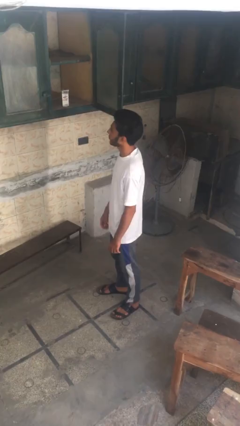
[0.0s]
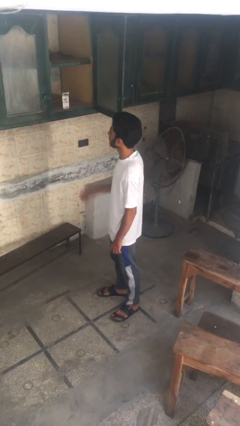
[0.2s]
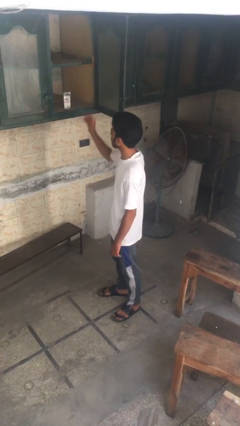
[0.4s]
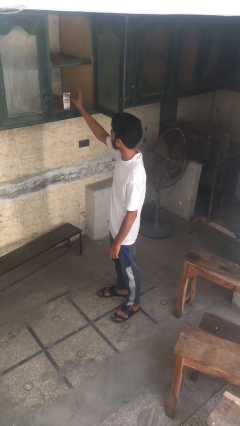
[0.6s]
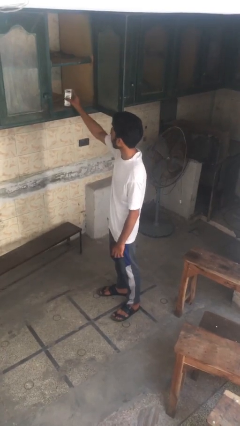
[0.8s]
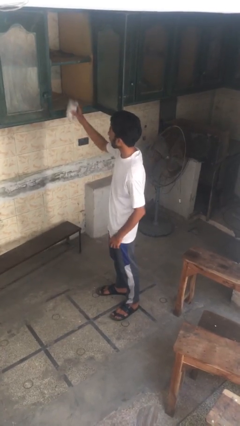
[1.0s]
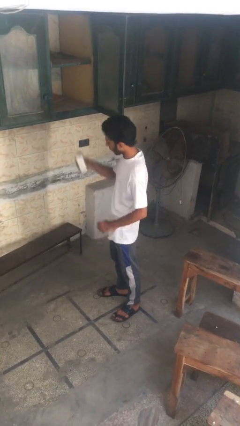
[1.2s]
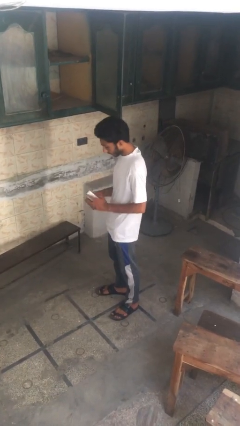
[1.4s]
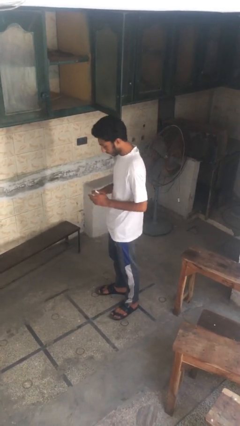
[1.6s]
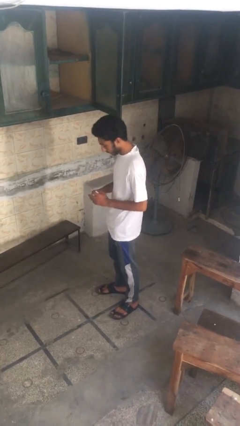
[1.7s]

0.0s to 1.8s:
person takes object from cabinet

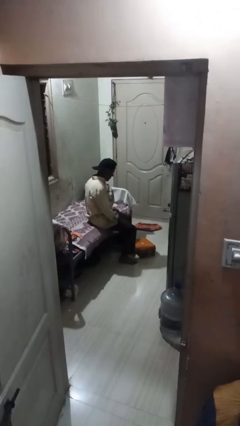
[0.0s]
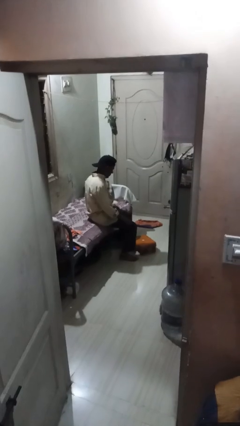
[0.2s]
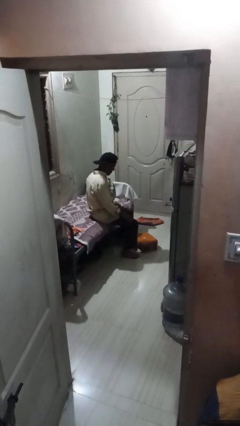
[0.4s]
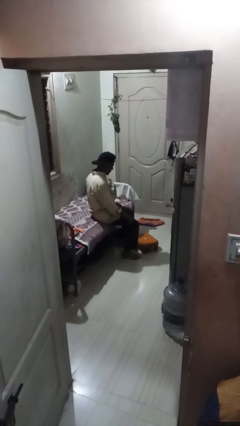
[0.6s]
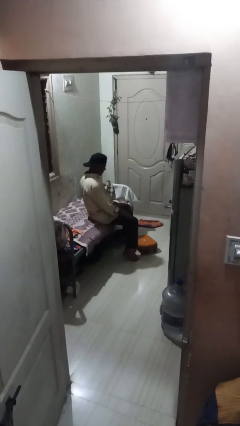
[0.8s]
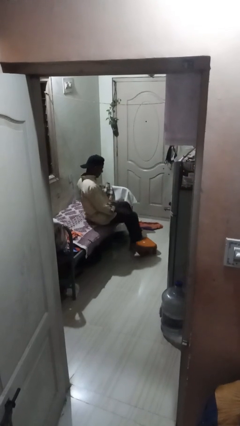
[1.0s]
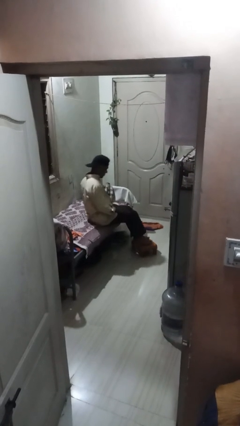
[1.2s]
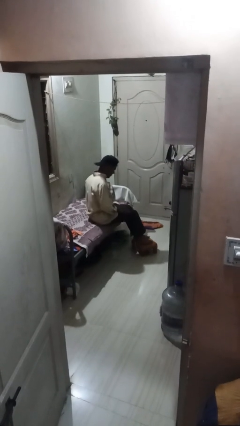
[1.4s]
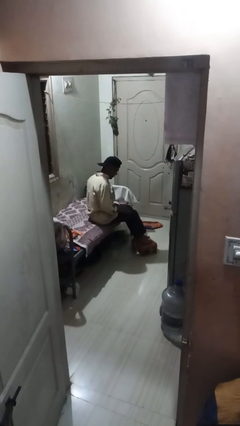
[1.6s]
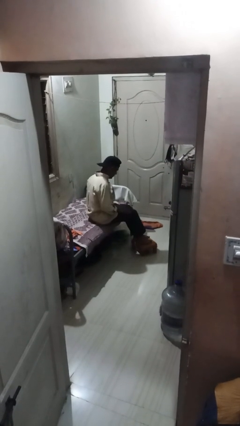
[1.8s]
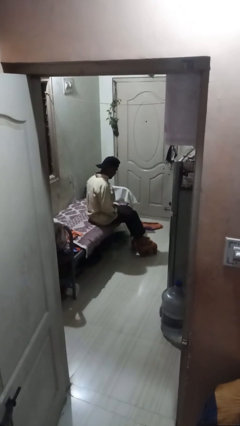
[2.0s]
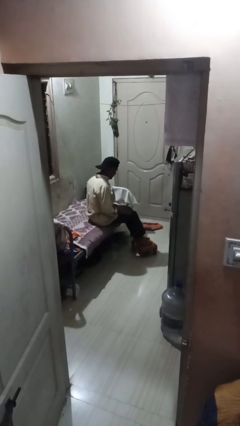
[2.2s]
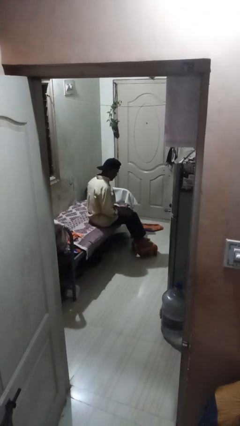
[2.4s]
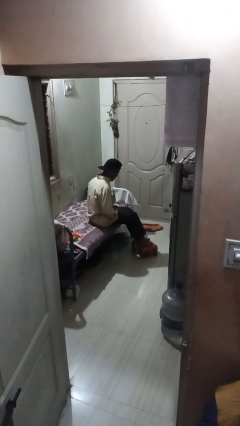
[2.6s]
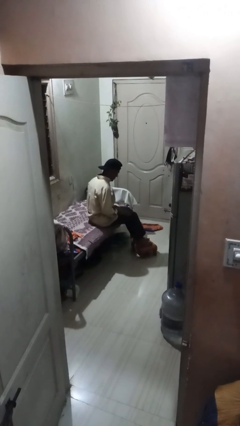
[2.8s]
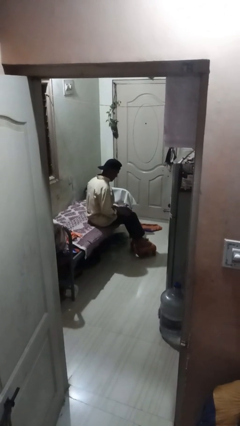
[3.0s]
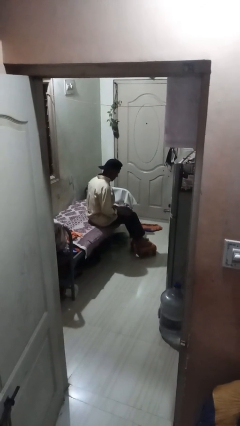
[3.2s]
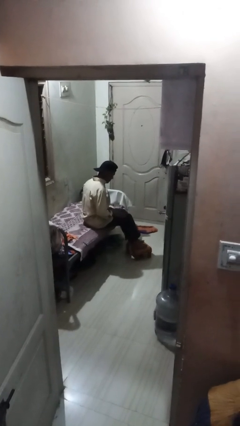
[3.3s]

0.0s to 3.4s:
person puts feet up

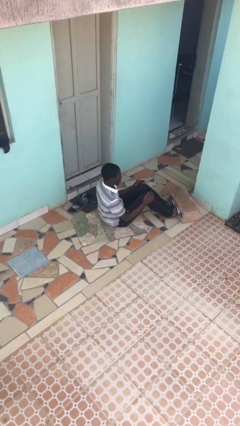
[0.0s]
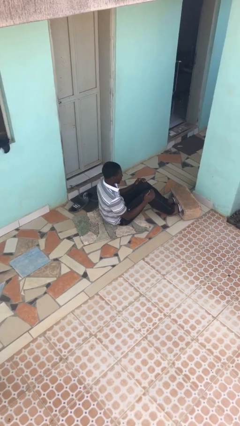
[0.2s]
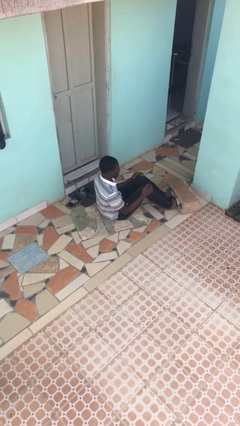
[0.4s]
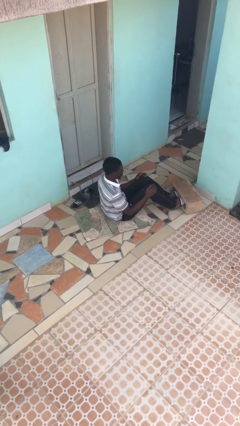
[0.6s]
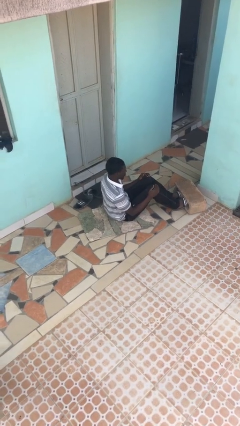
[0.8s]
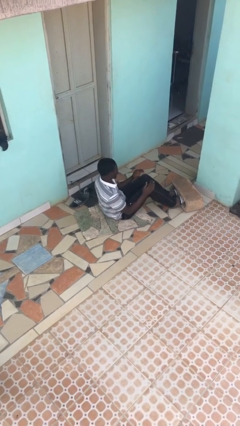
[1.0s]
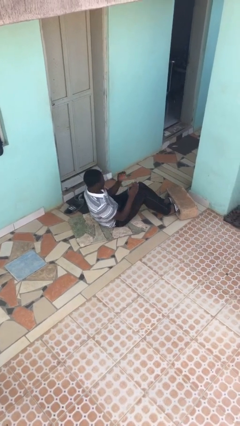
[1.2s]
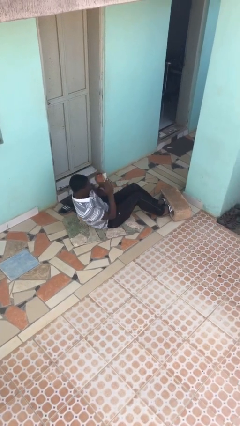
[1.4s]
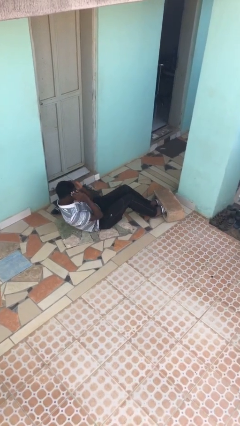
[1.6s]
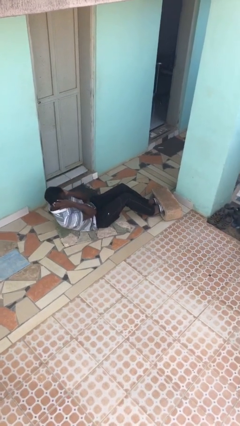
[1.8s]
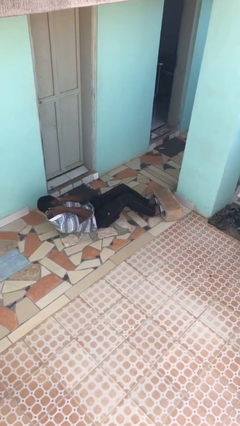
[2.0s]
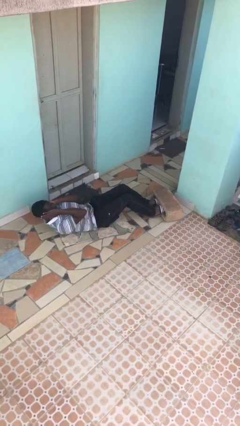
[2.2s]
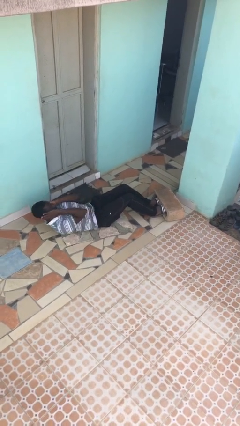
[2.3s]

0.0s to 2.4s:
person exercises with situp

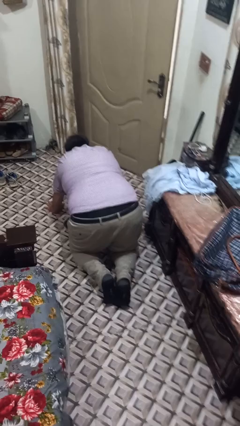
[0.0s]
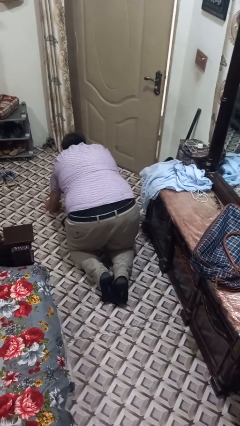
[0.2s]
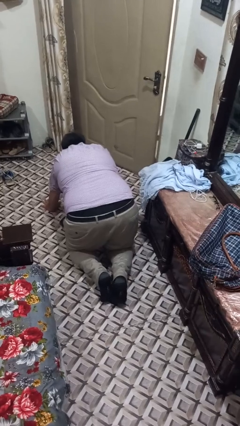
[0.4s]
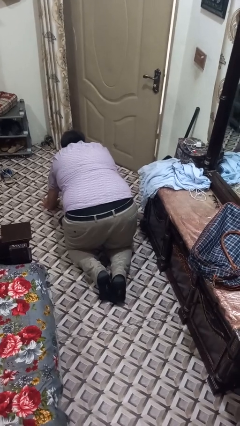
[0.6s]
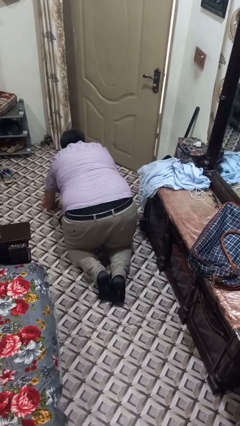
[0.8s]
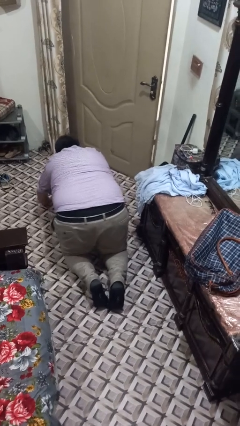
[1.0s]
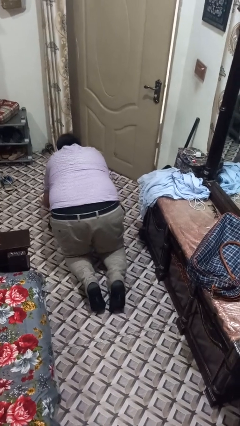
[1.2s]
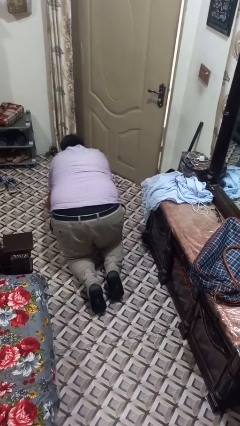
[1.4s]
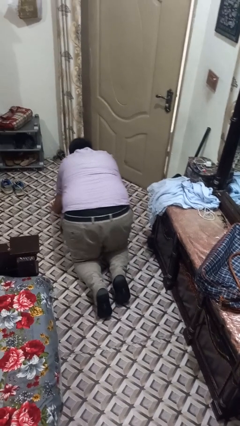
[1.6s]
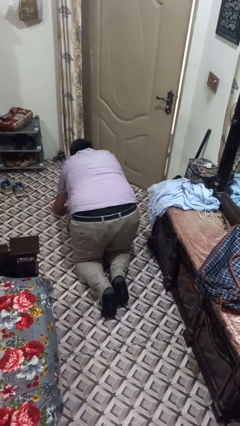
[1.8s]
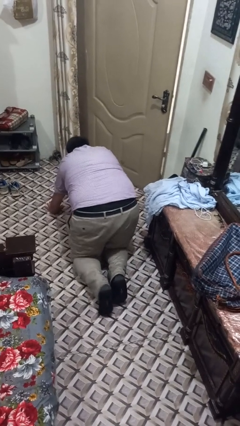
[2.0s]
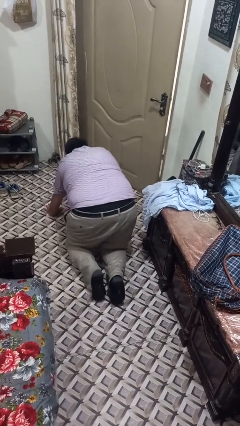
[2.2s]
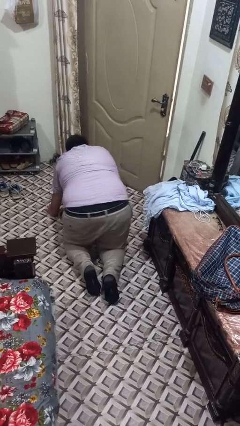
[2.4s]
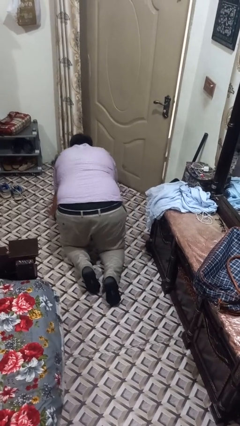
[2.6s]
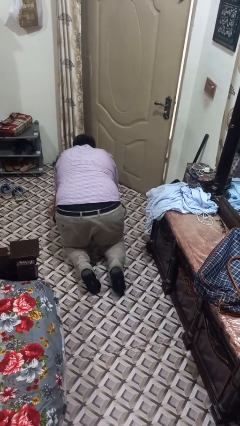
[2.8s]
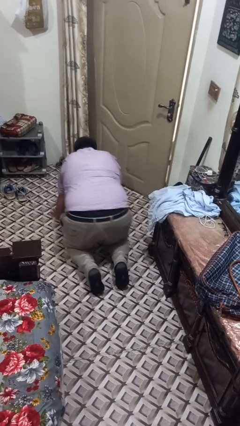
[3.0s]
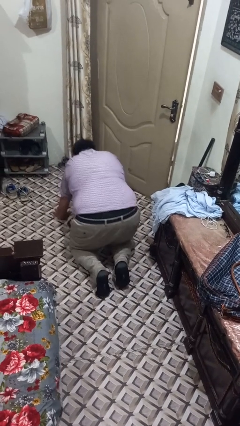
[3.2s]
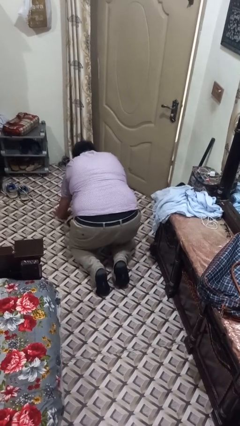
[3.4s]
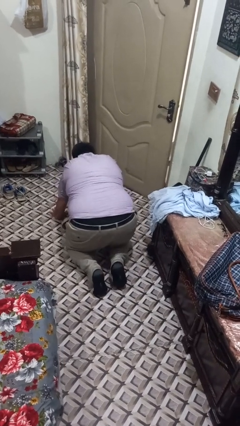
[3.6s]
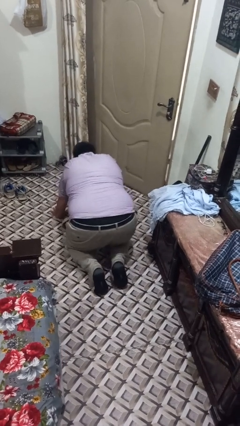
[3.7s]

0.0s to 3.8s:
person crawls

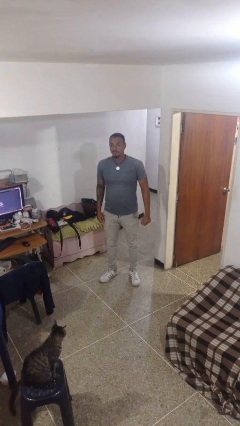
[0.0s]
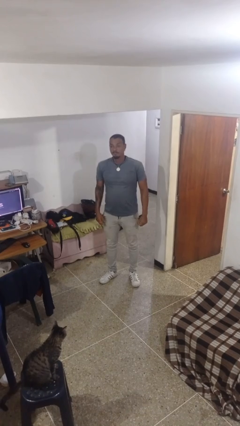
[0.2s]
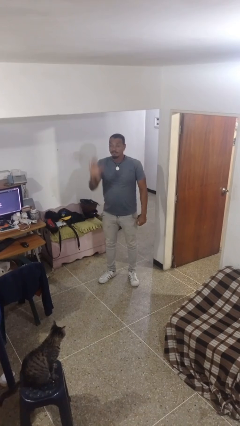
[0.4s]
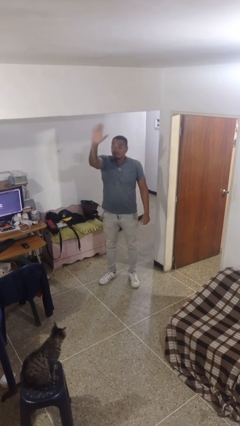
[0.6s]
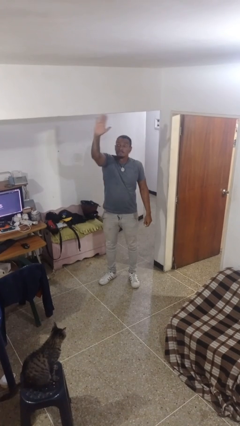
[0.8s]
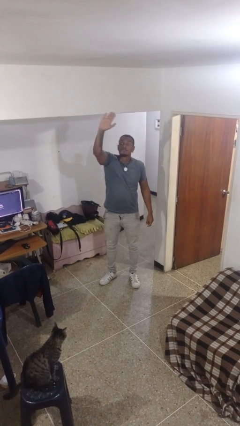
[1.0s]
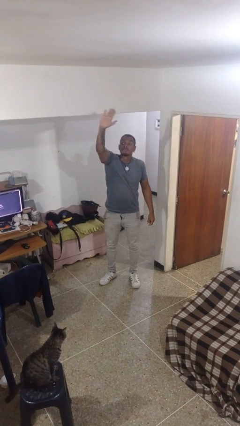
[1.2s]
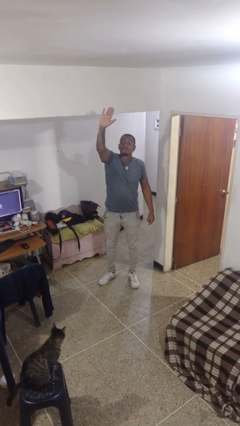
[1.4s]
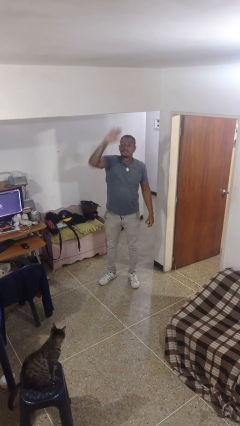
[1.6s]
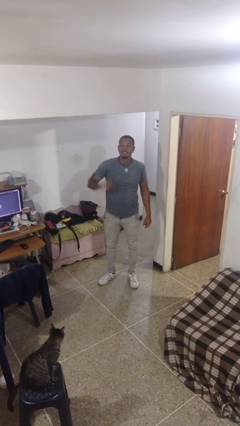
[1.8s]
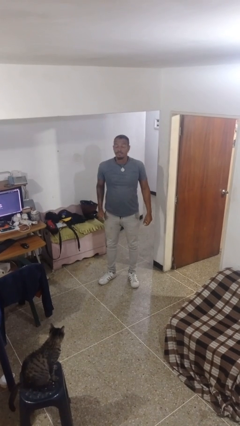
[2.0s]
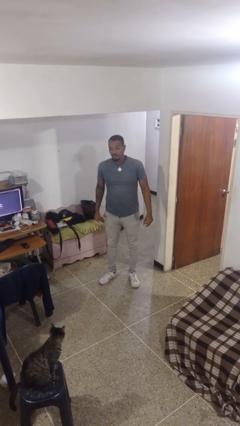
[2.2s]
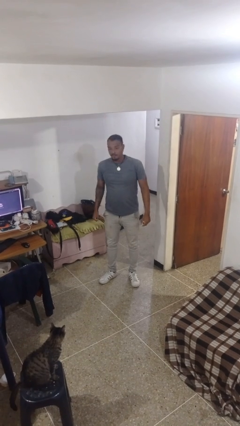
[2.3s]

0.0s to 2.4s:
person gestures stop

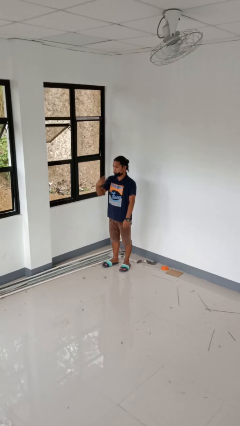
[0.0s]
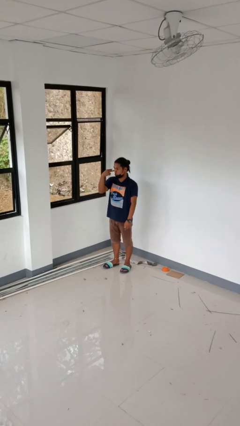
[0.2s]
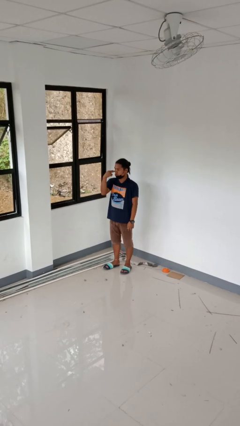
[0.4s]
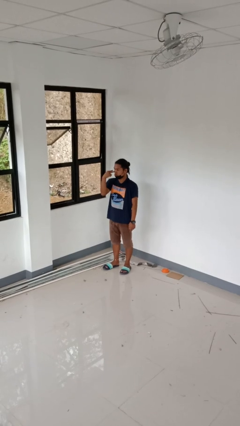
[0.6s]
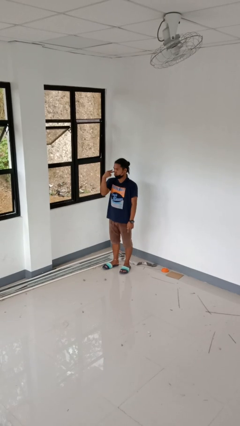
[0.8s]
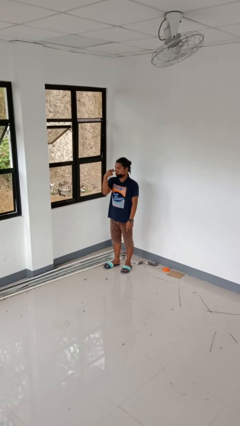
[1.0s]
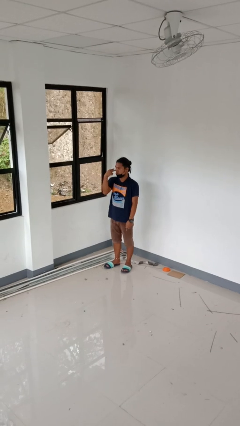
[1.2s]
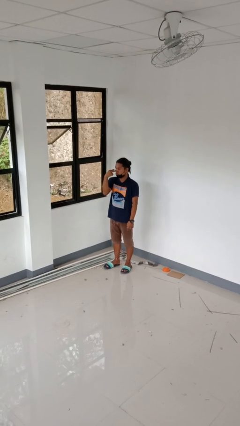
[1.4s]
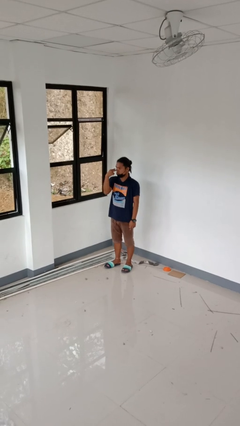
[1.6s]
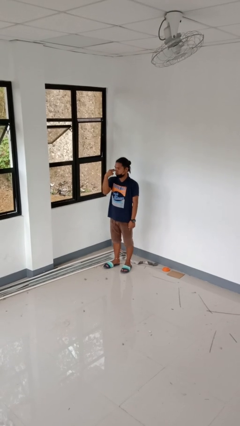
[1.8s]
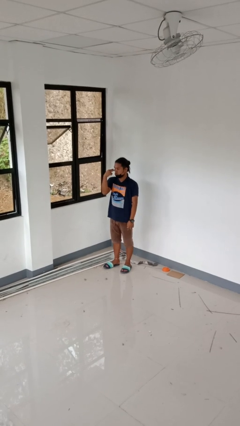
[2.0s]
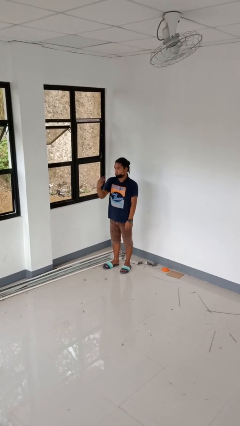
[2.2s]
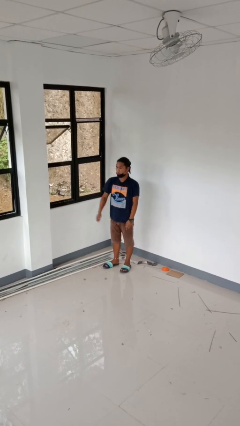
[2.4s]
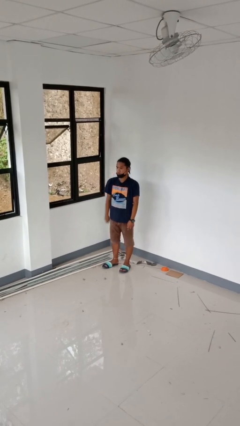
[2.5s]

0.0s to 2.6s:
person gestures watch closely

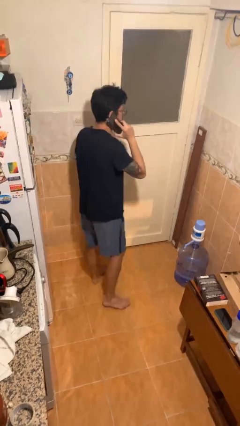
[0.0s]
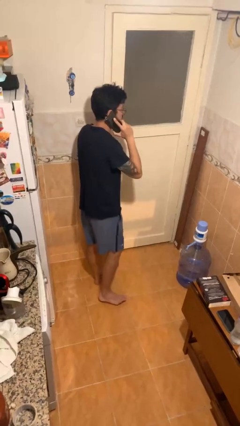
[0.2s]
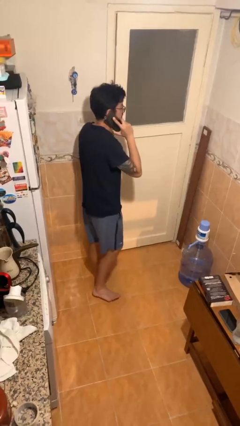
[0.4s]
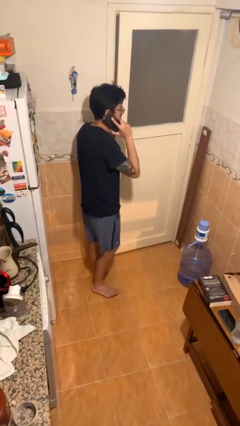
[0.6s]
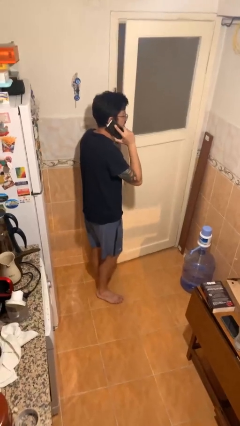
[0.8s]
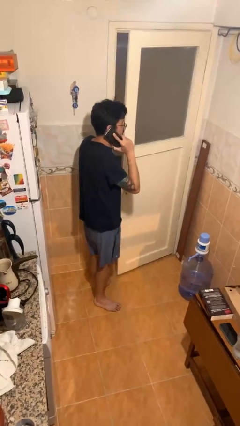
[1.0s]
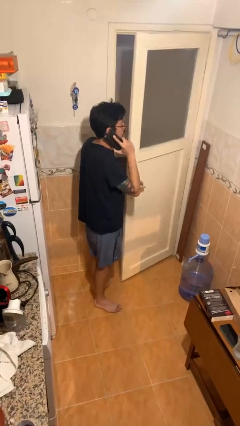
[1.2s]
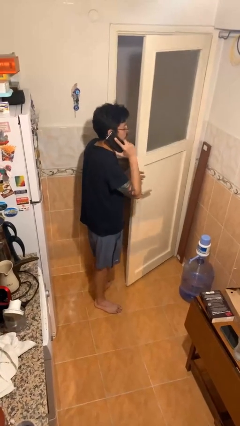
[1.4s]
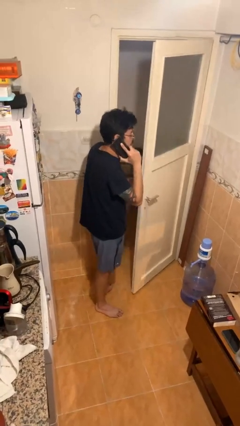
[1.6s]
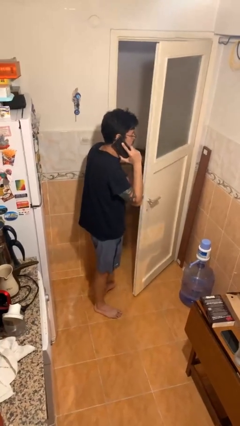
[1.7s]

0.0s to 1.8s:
person opens facility door
